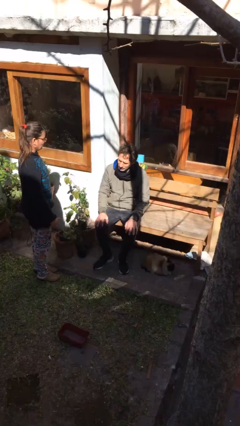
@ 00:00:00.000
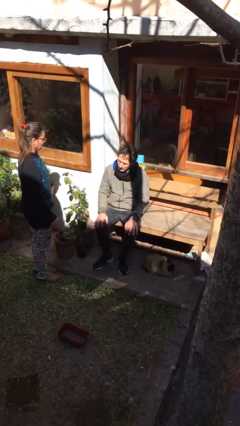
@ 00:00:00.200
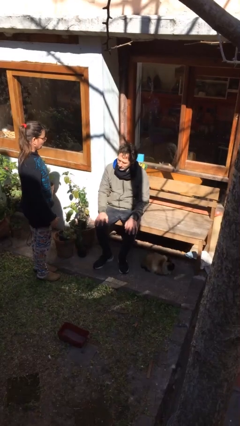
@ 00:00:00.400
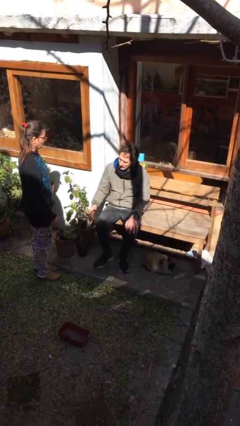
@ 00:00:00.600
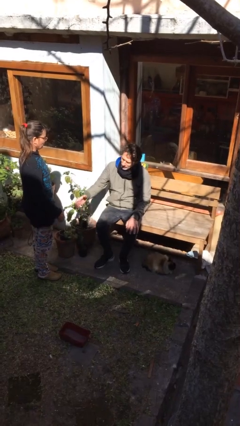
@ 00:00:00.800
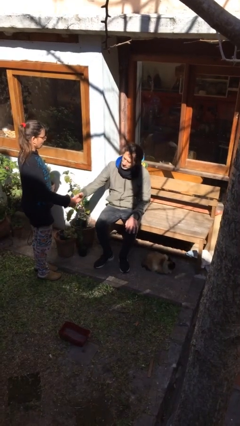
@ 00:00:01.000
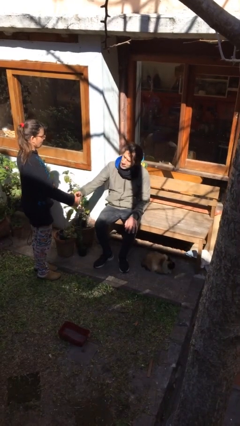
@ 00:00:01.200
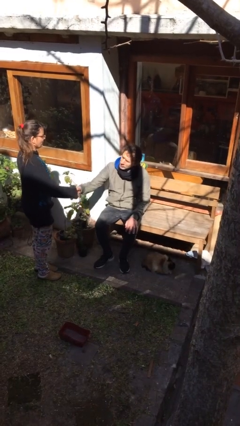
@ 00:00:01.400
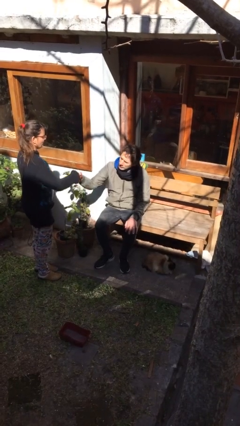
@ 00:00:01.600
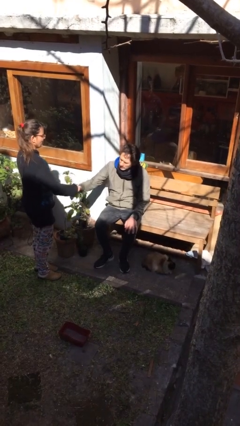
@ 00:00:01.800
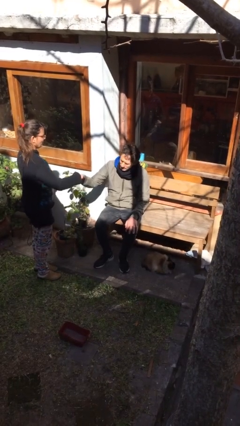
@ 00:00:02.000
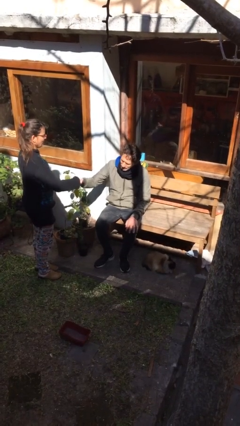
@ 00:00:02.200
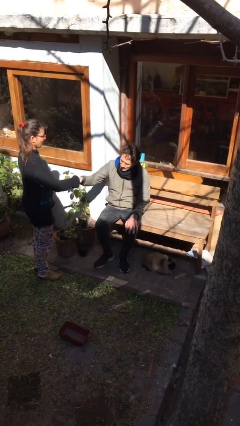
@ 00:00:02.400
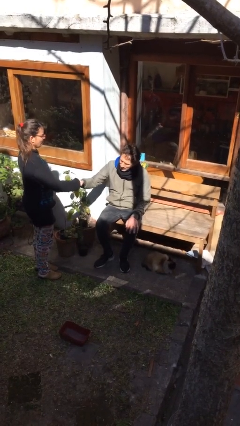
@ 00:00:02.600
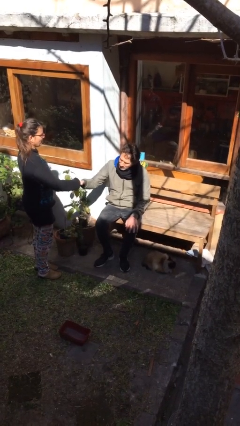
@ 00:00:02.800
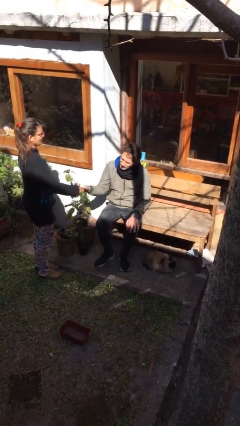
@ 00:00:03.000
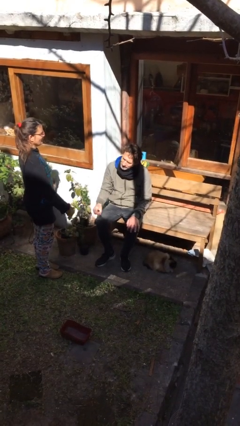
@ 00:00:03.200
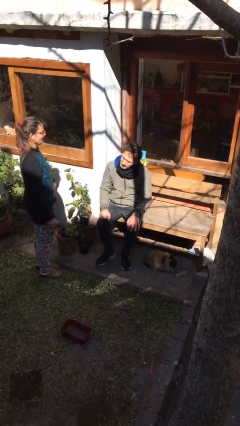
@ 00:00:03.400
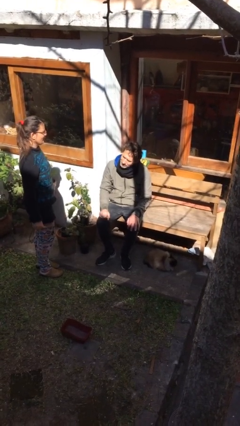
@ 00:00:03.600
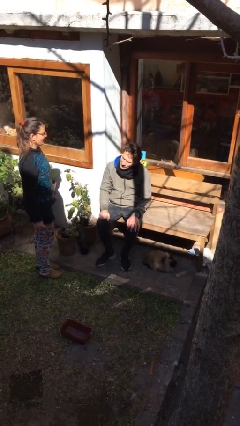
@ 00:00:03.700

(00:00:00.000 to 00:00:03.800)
person shakes hand

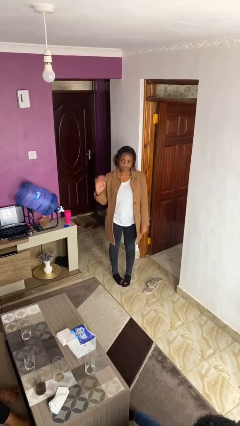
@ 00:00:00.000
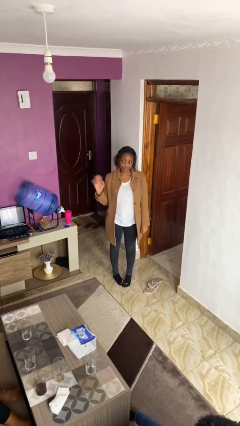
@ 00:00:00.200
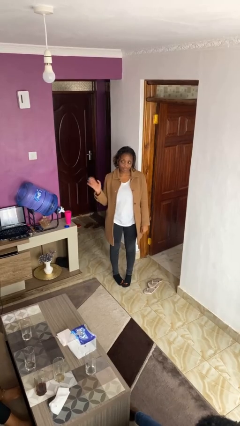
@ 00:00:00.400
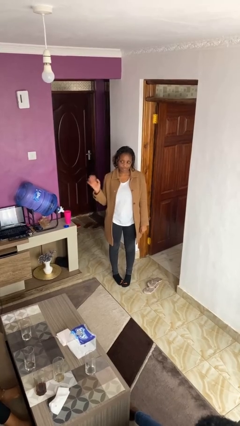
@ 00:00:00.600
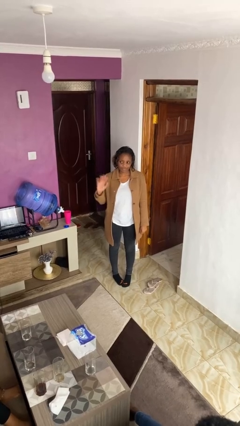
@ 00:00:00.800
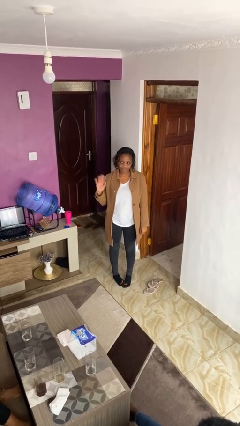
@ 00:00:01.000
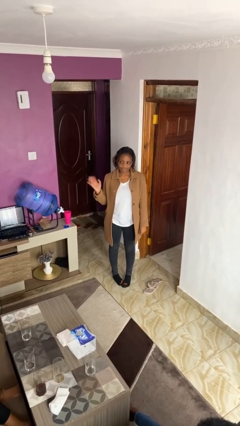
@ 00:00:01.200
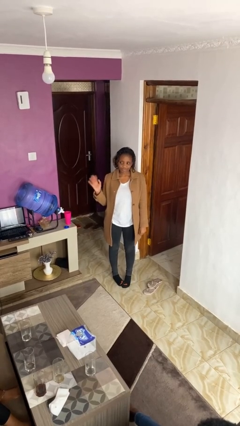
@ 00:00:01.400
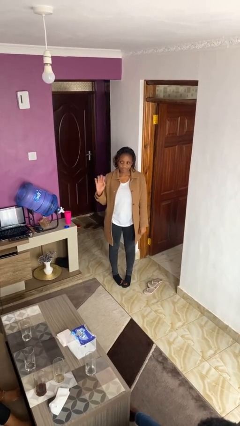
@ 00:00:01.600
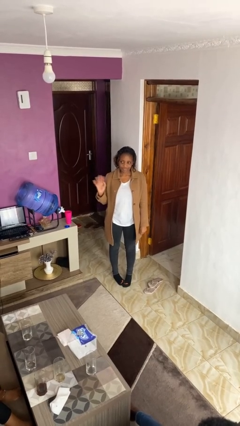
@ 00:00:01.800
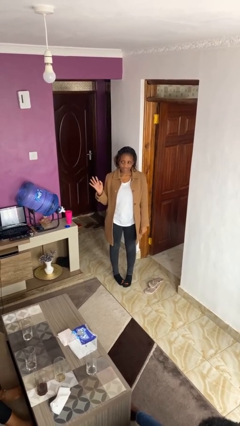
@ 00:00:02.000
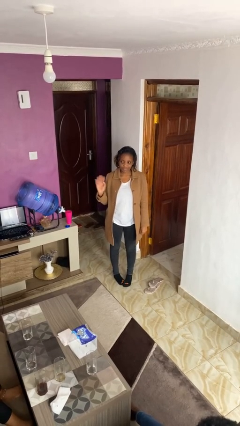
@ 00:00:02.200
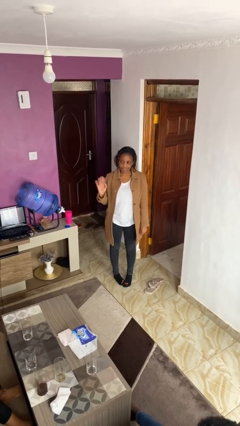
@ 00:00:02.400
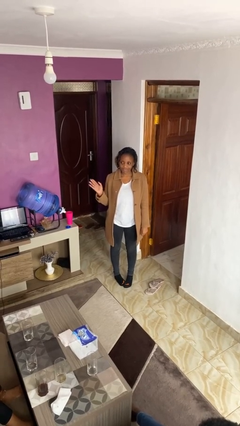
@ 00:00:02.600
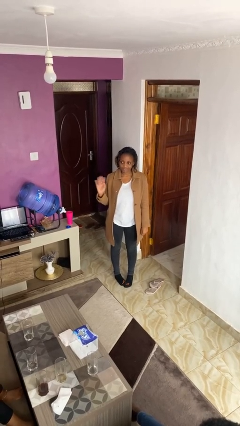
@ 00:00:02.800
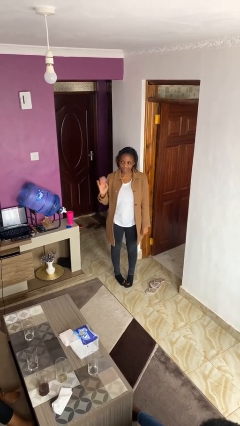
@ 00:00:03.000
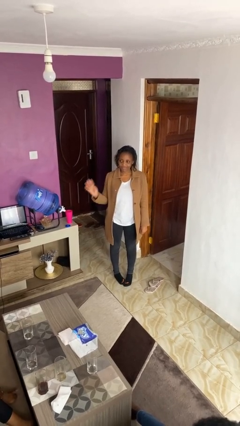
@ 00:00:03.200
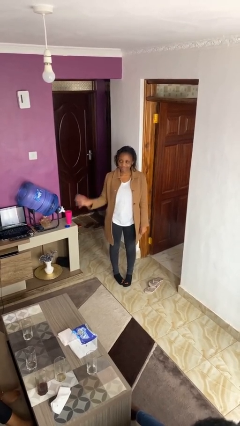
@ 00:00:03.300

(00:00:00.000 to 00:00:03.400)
person waves at person

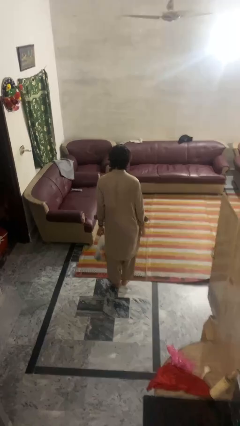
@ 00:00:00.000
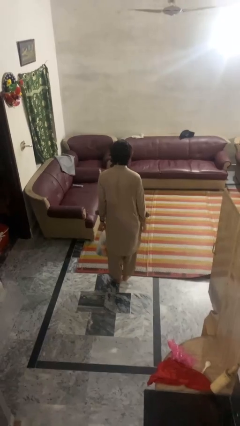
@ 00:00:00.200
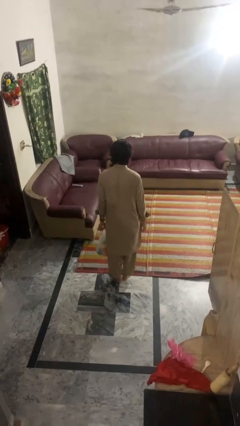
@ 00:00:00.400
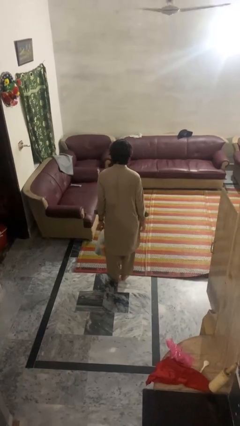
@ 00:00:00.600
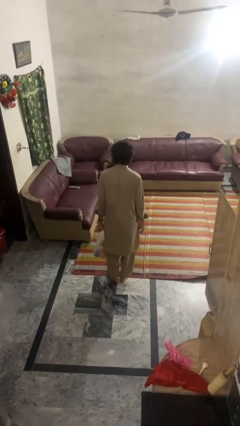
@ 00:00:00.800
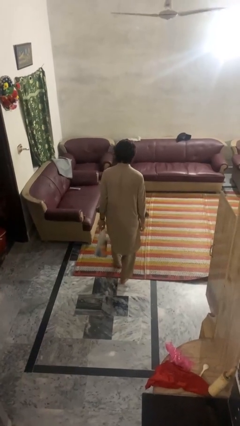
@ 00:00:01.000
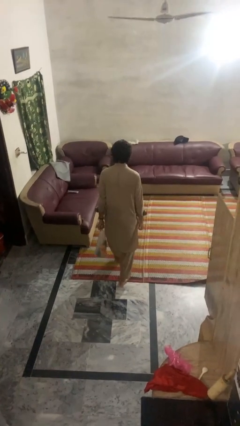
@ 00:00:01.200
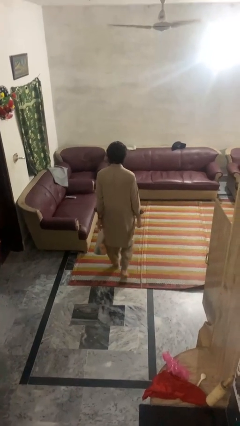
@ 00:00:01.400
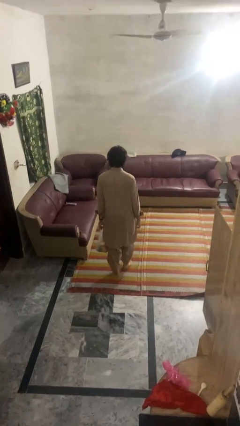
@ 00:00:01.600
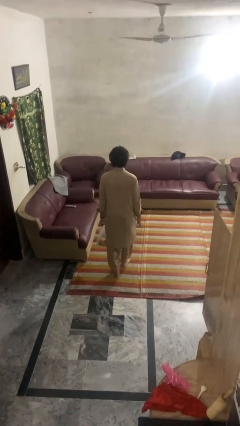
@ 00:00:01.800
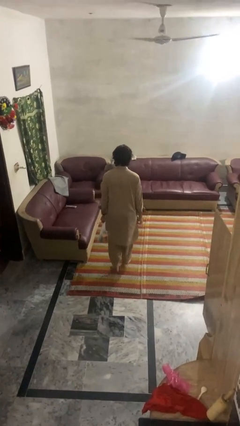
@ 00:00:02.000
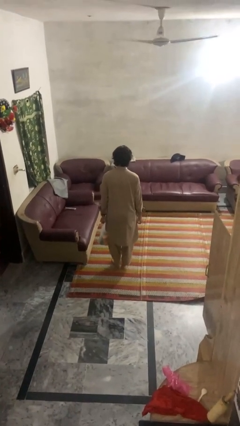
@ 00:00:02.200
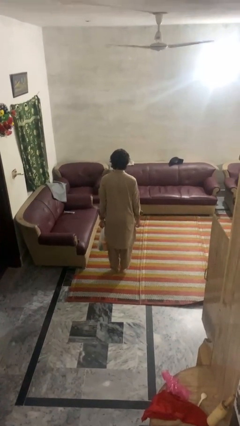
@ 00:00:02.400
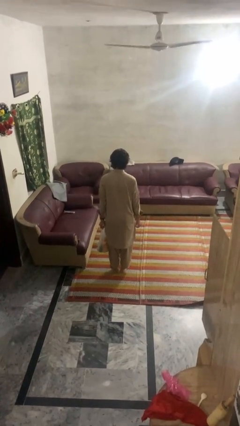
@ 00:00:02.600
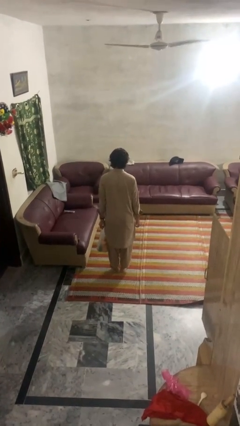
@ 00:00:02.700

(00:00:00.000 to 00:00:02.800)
person carries groceries

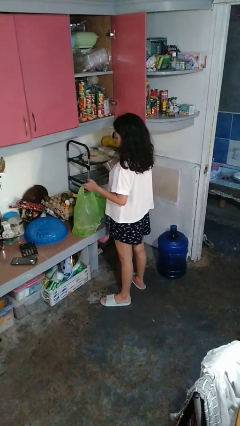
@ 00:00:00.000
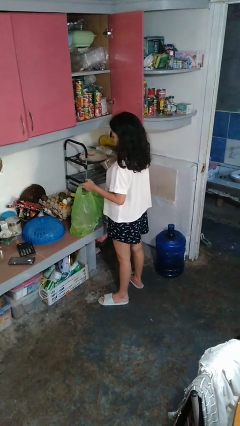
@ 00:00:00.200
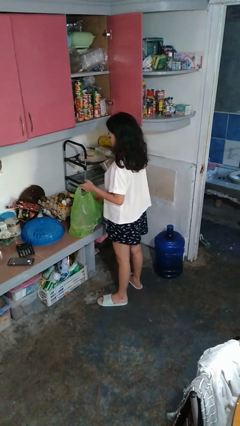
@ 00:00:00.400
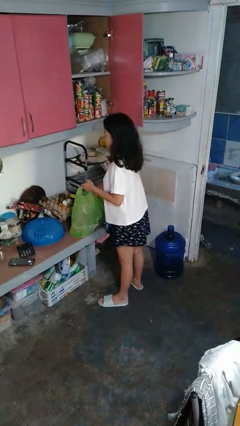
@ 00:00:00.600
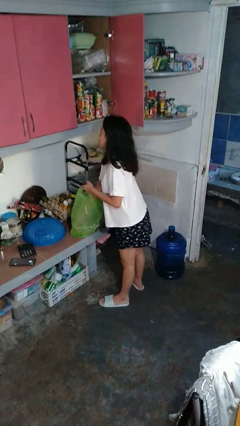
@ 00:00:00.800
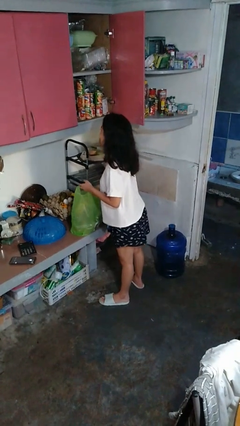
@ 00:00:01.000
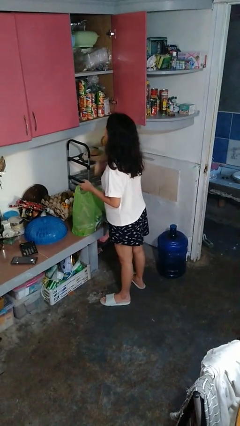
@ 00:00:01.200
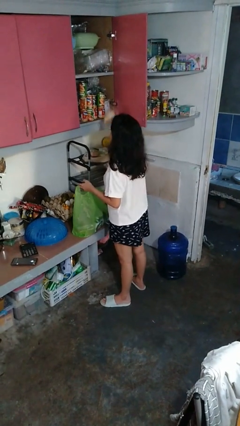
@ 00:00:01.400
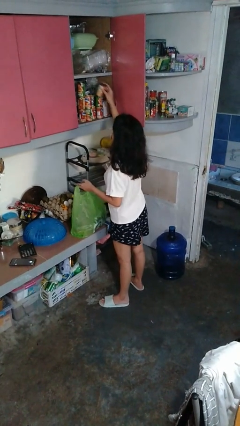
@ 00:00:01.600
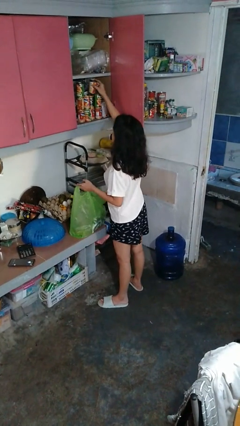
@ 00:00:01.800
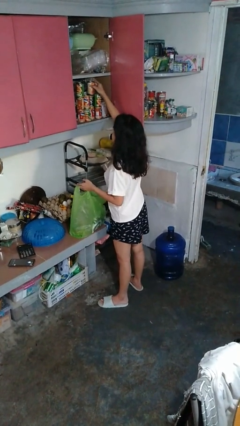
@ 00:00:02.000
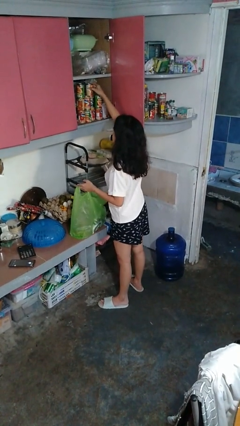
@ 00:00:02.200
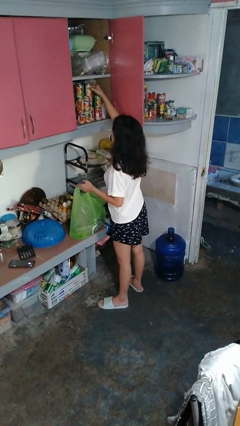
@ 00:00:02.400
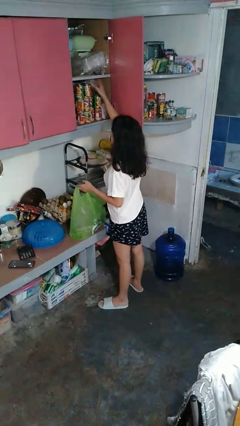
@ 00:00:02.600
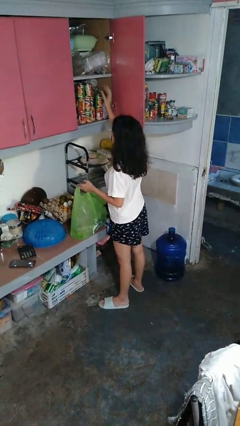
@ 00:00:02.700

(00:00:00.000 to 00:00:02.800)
person loads groceries into cabinet

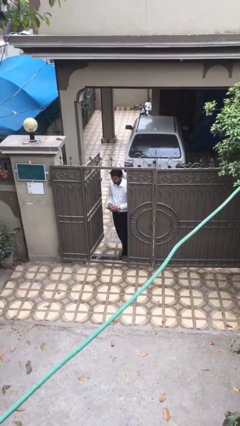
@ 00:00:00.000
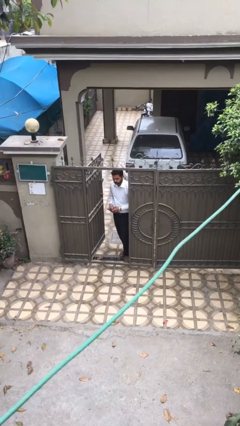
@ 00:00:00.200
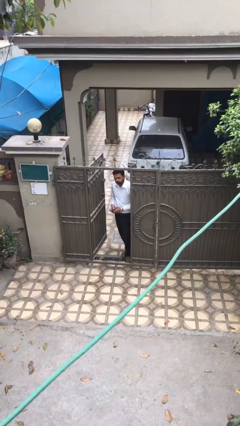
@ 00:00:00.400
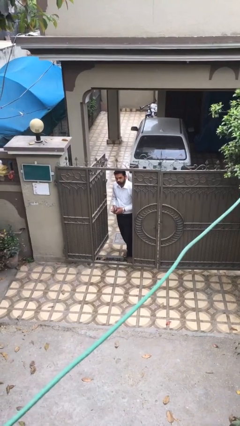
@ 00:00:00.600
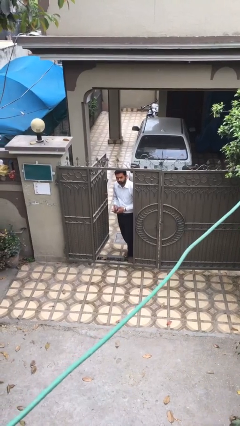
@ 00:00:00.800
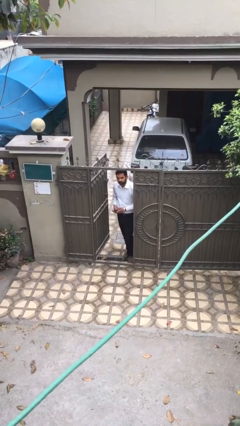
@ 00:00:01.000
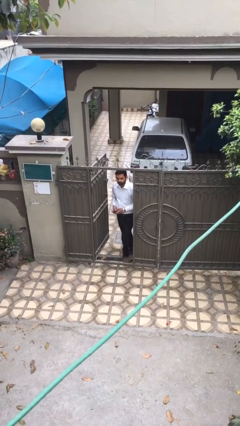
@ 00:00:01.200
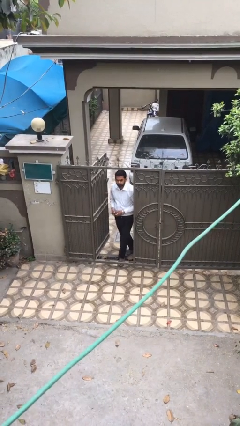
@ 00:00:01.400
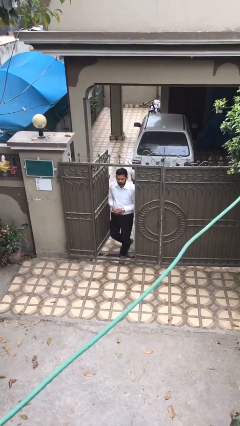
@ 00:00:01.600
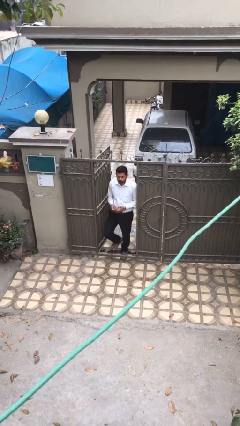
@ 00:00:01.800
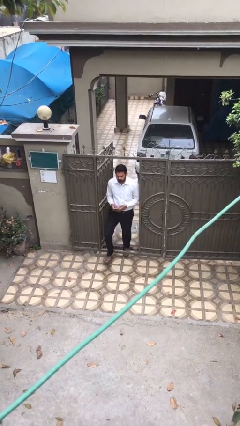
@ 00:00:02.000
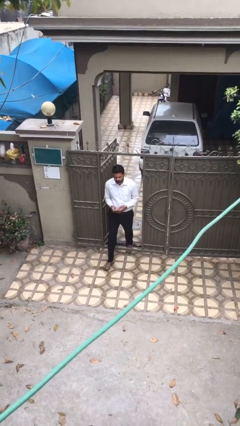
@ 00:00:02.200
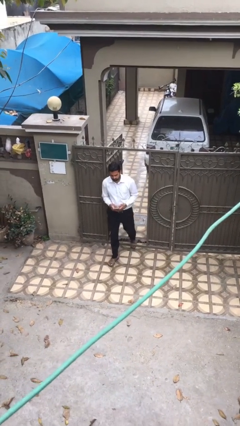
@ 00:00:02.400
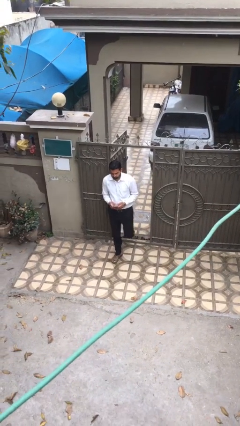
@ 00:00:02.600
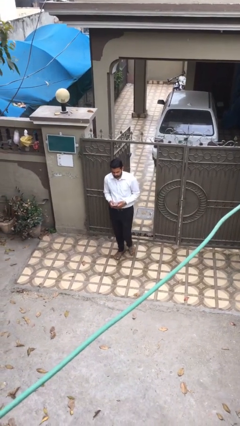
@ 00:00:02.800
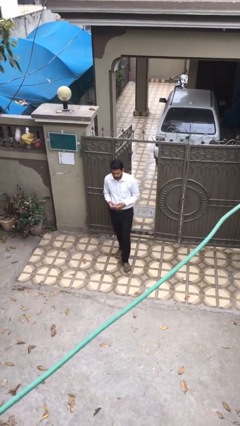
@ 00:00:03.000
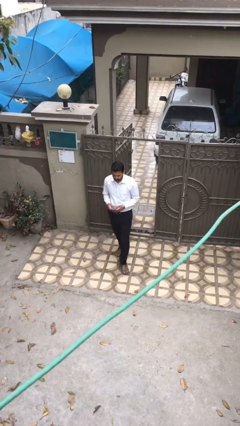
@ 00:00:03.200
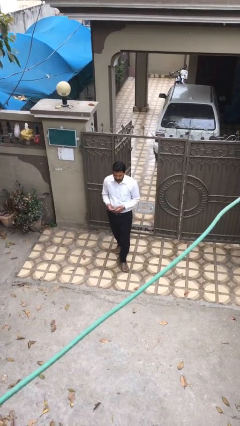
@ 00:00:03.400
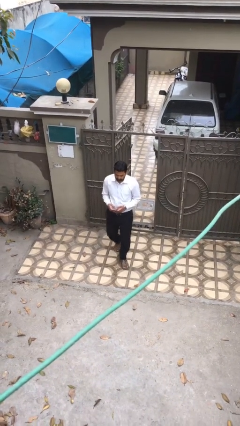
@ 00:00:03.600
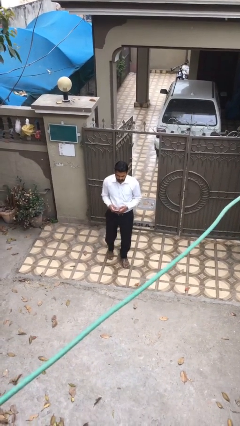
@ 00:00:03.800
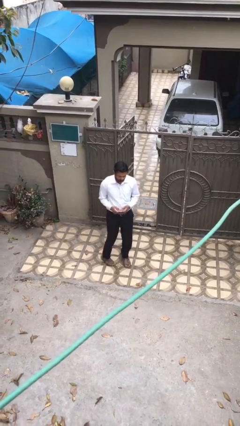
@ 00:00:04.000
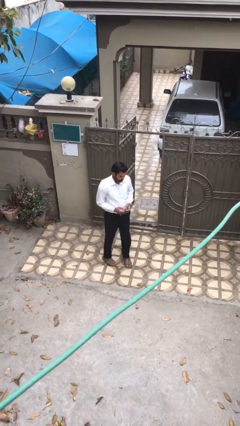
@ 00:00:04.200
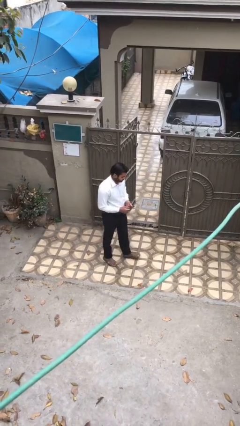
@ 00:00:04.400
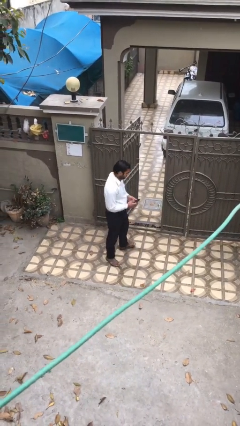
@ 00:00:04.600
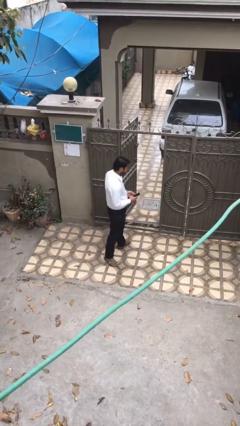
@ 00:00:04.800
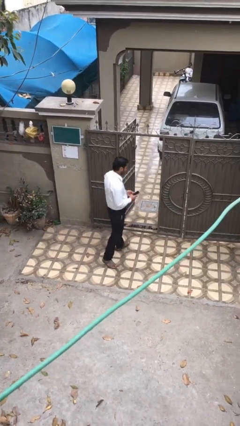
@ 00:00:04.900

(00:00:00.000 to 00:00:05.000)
person enters scene through structure
